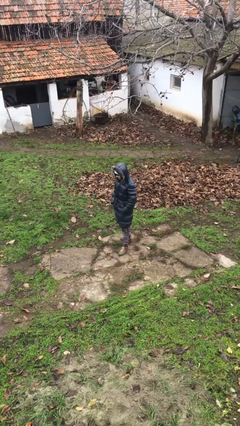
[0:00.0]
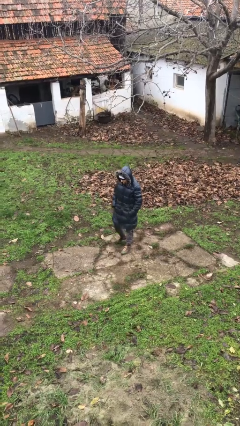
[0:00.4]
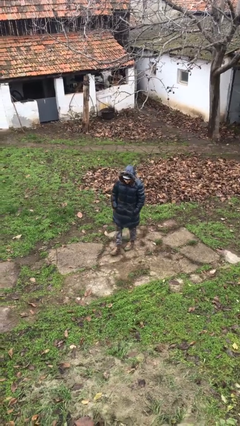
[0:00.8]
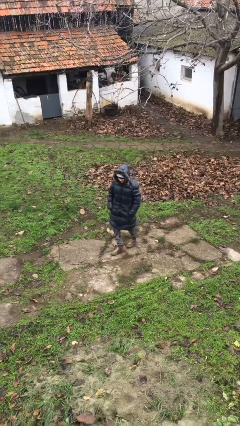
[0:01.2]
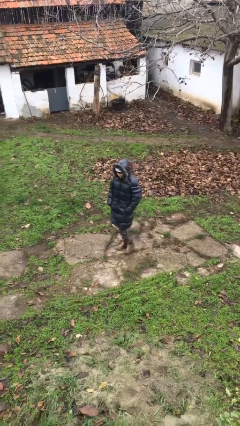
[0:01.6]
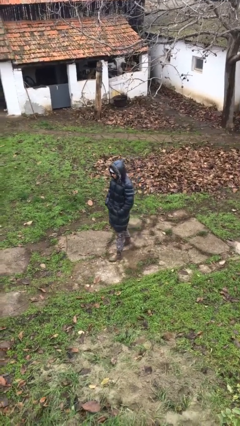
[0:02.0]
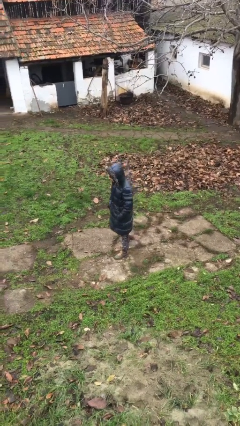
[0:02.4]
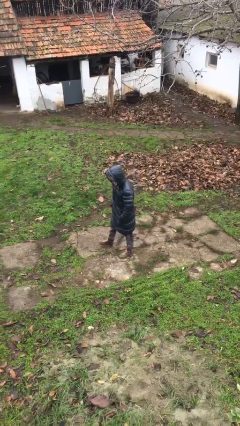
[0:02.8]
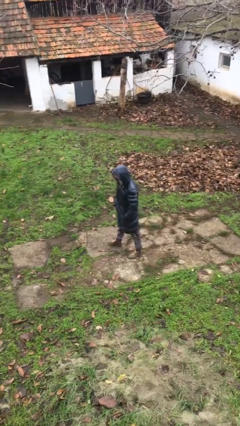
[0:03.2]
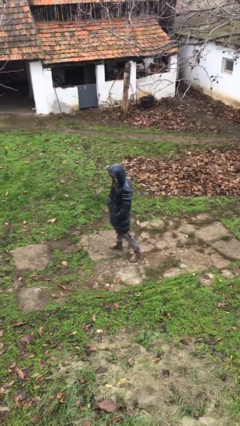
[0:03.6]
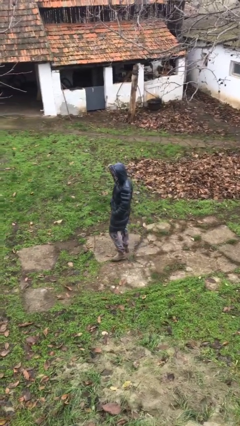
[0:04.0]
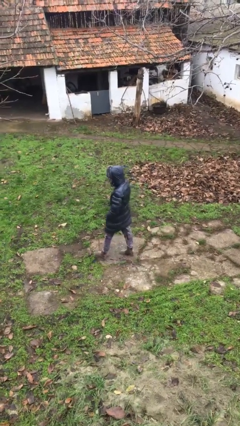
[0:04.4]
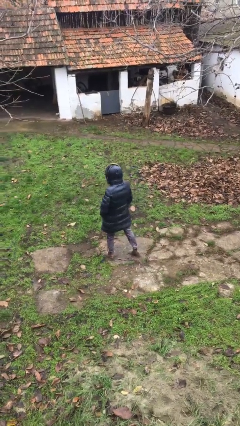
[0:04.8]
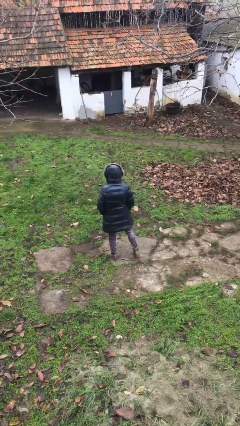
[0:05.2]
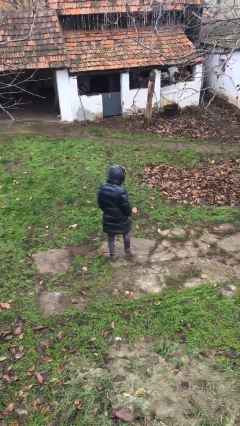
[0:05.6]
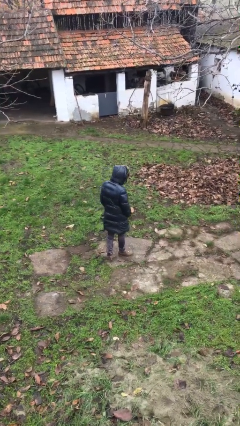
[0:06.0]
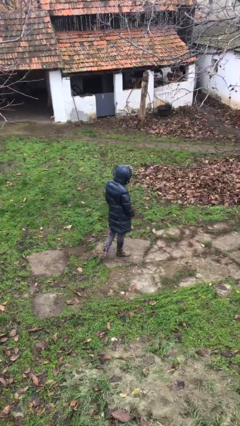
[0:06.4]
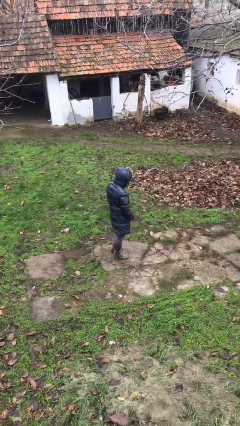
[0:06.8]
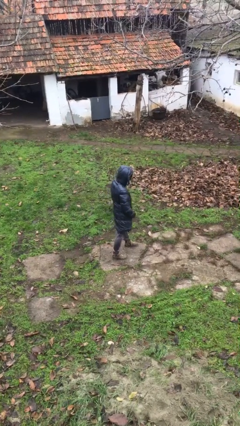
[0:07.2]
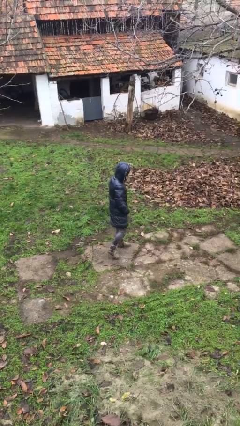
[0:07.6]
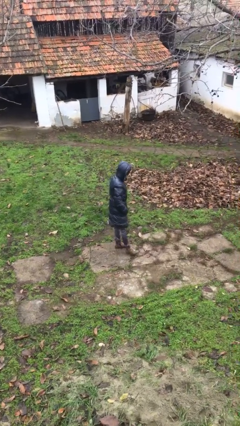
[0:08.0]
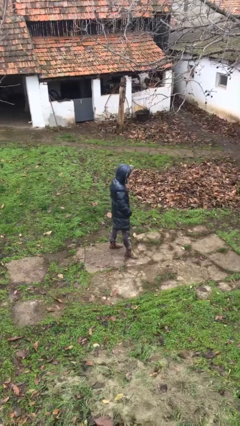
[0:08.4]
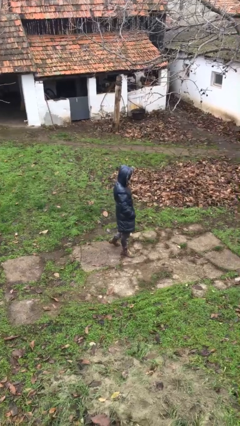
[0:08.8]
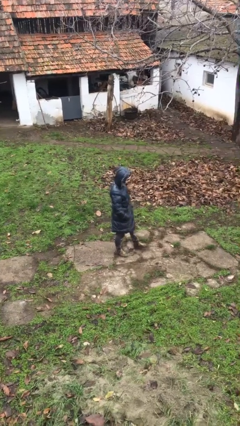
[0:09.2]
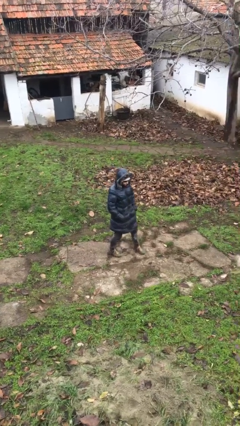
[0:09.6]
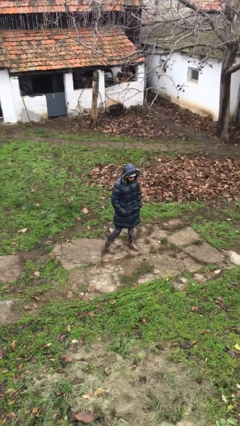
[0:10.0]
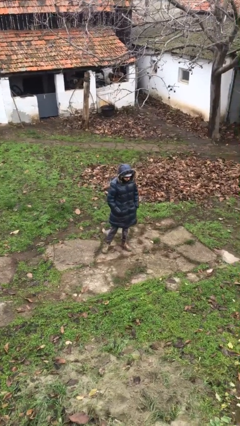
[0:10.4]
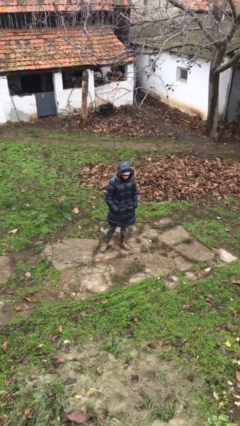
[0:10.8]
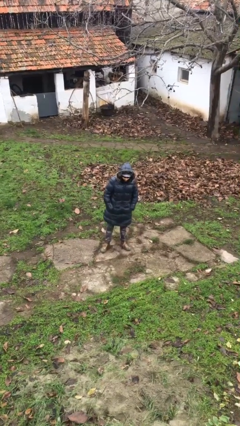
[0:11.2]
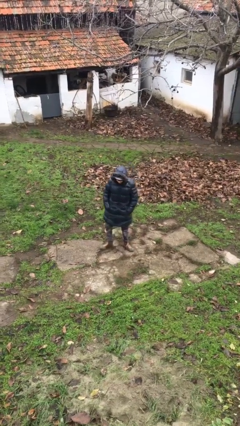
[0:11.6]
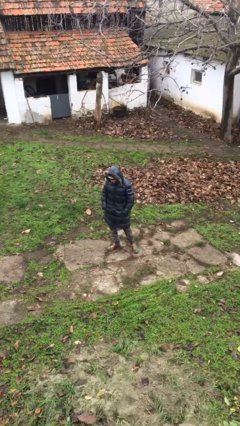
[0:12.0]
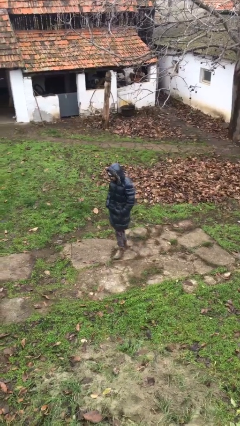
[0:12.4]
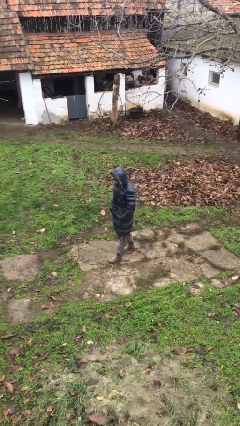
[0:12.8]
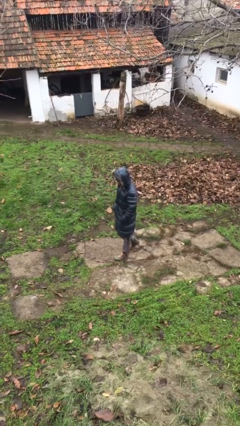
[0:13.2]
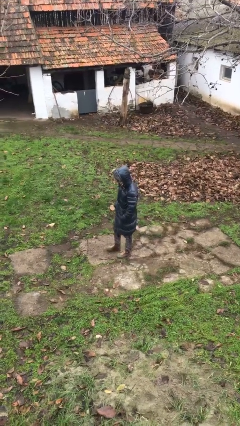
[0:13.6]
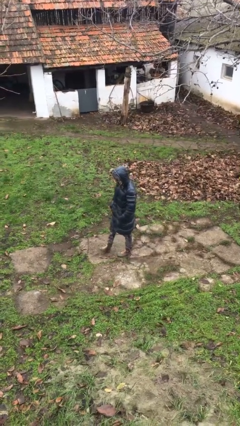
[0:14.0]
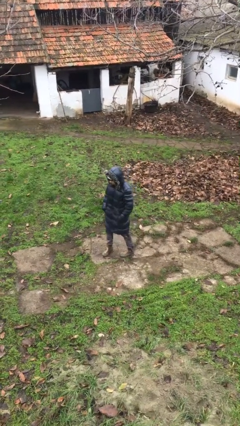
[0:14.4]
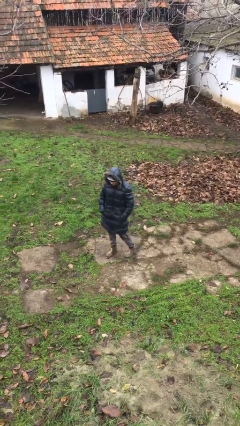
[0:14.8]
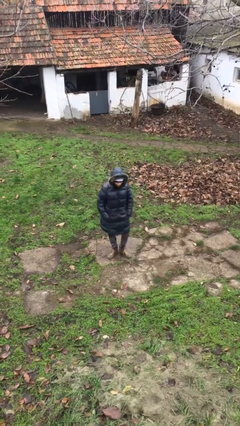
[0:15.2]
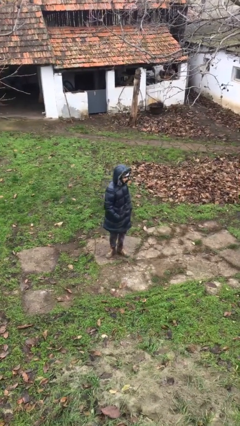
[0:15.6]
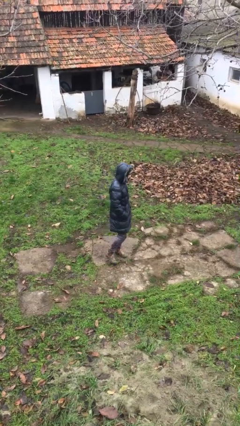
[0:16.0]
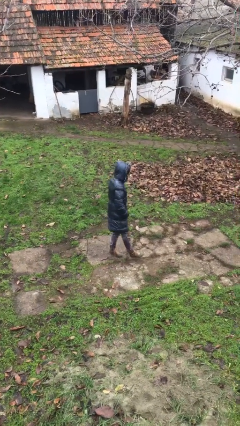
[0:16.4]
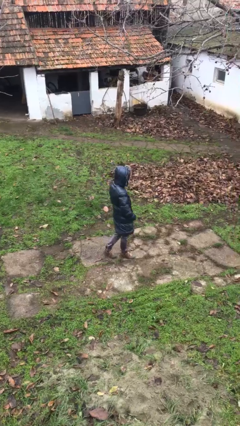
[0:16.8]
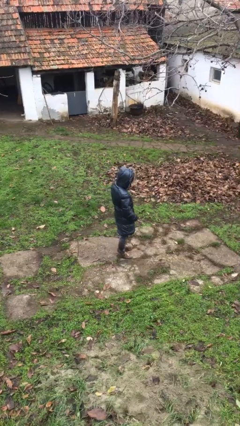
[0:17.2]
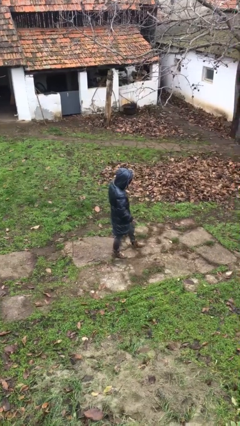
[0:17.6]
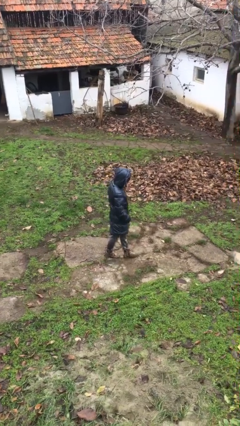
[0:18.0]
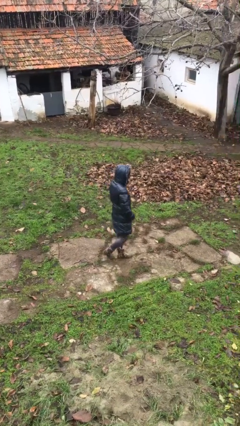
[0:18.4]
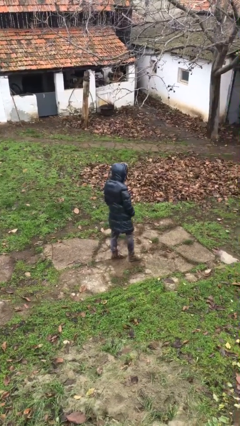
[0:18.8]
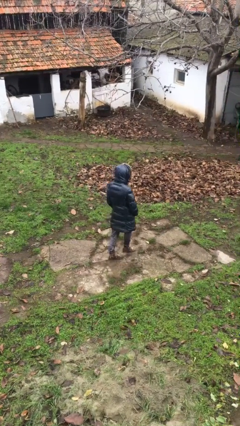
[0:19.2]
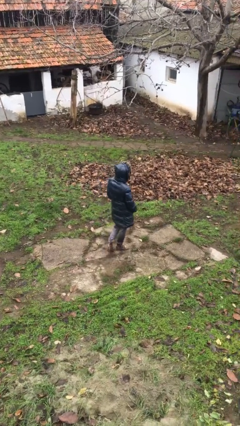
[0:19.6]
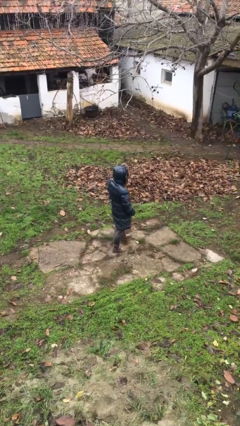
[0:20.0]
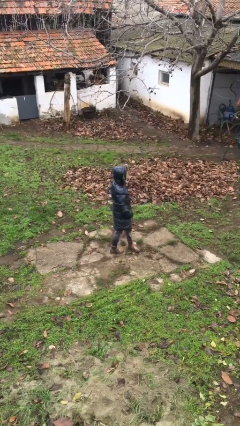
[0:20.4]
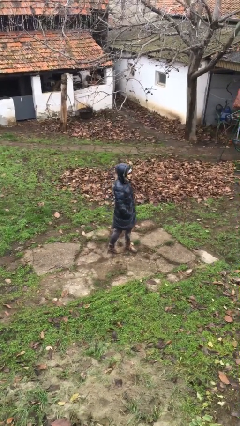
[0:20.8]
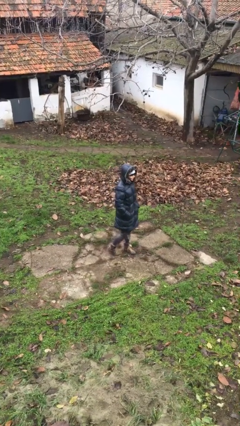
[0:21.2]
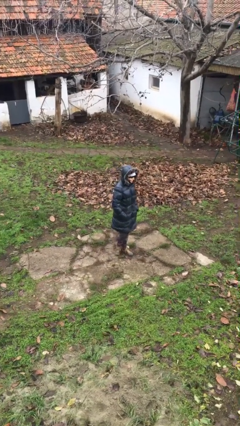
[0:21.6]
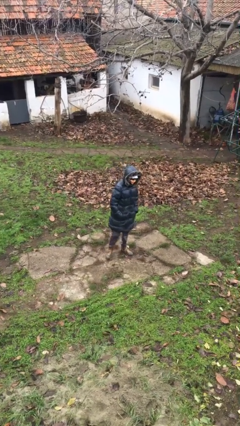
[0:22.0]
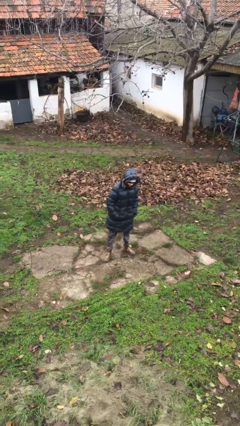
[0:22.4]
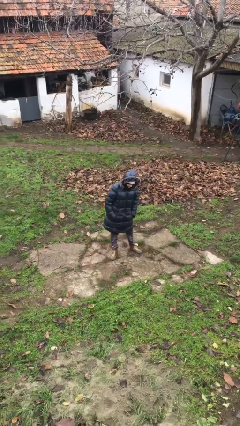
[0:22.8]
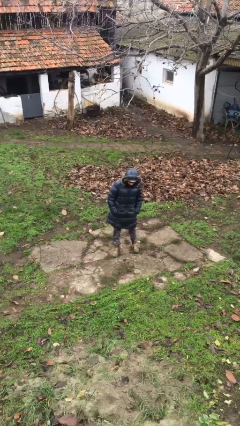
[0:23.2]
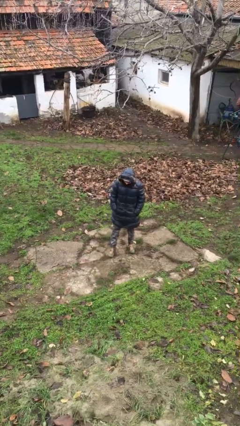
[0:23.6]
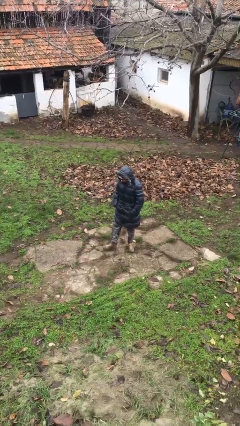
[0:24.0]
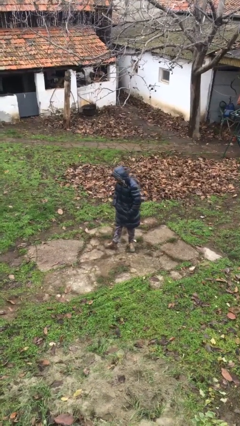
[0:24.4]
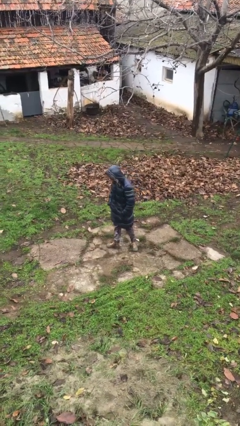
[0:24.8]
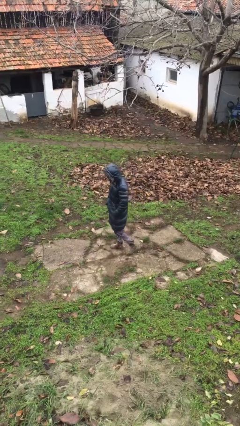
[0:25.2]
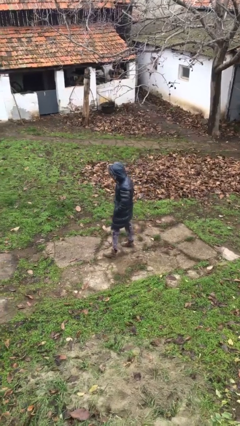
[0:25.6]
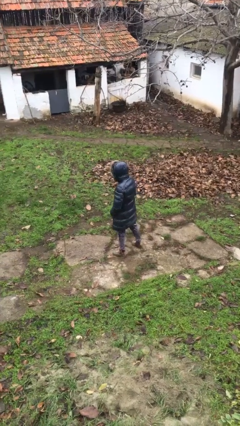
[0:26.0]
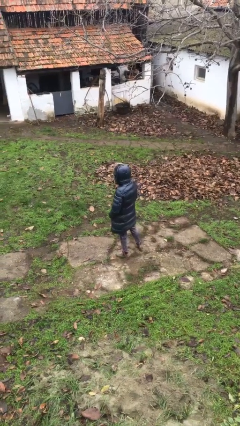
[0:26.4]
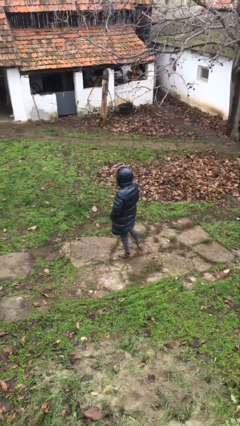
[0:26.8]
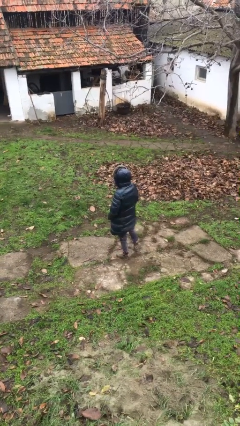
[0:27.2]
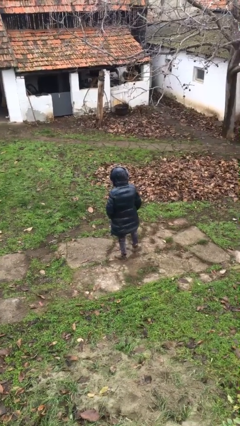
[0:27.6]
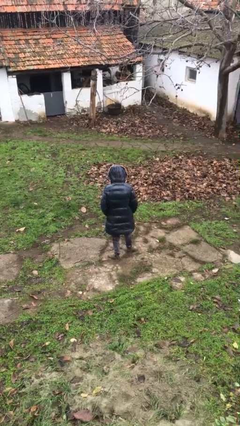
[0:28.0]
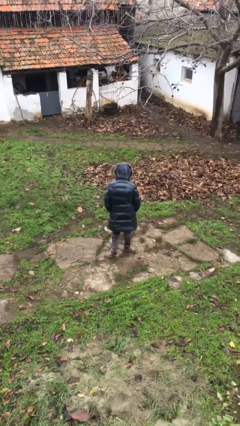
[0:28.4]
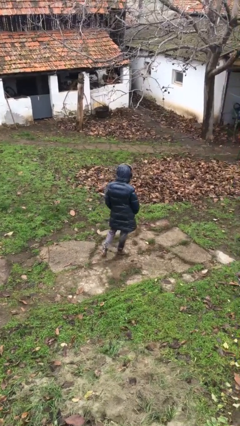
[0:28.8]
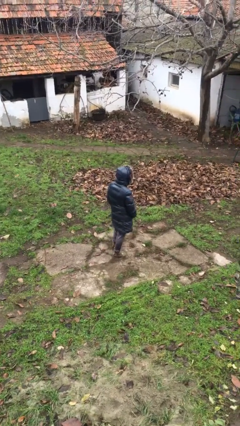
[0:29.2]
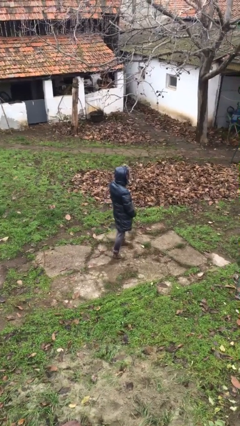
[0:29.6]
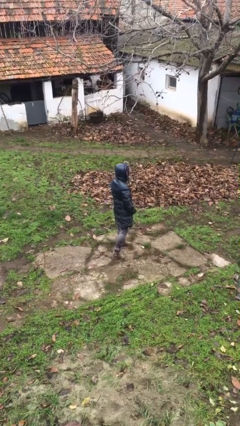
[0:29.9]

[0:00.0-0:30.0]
person walks

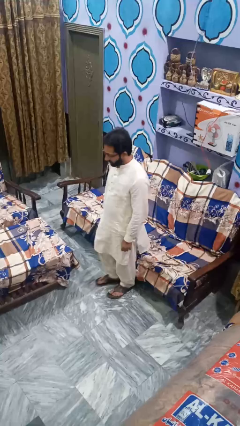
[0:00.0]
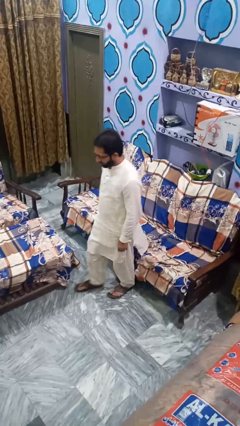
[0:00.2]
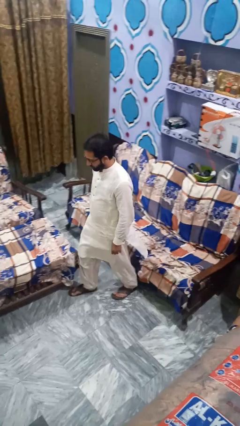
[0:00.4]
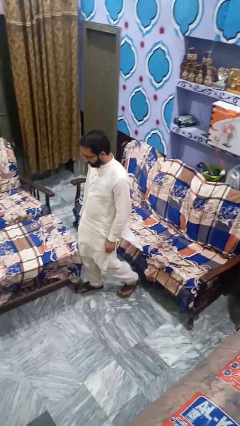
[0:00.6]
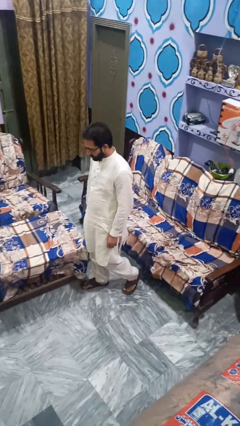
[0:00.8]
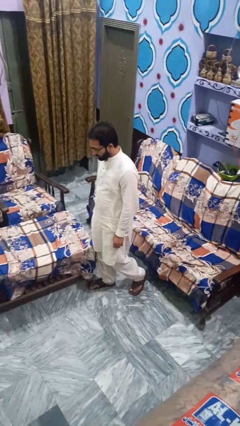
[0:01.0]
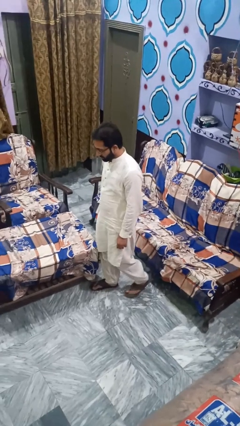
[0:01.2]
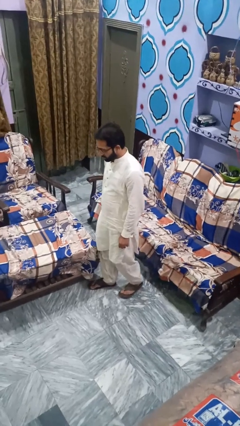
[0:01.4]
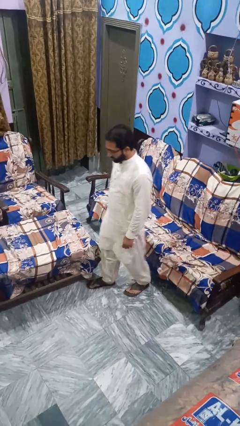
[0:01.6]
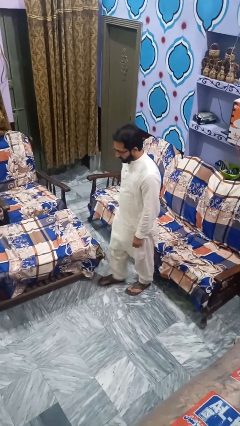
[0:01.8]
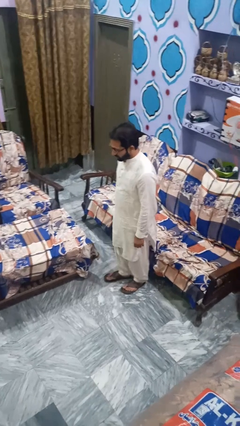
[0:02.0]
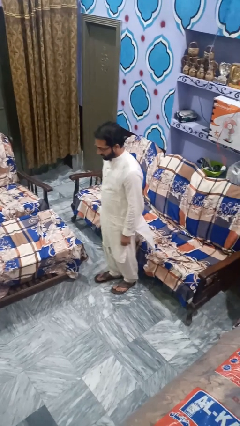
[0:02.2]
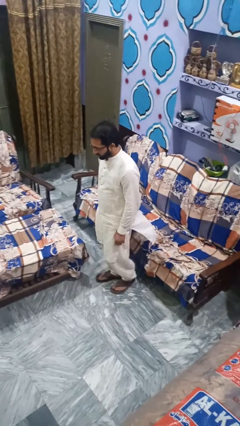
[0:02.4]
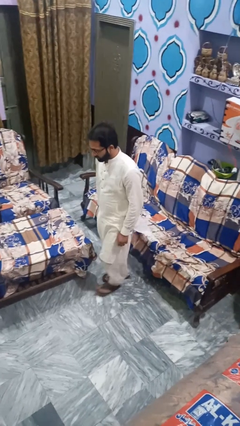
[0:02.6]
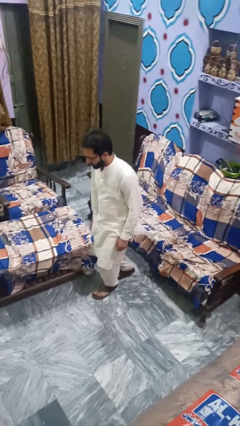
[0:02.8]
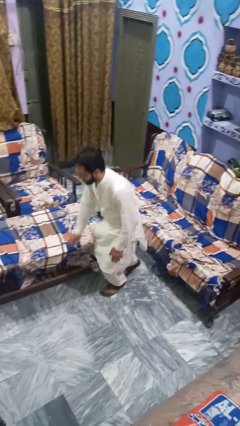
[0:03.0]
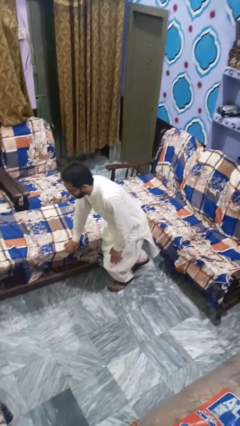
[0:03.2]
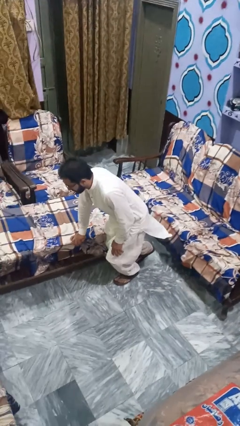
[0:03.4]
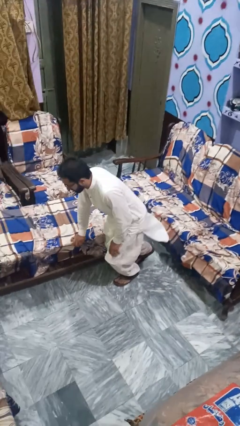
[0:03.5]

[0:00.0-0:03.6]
person trips on object on floor
